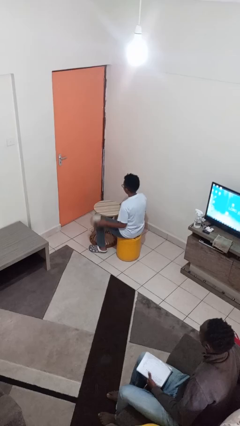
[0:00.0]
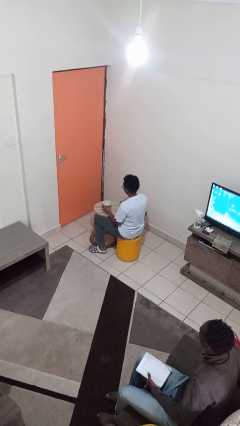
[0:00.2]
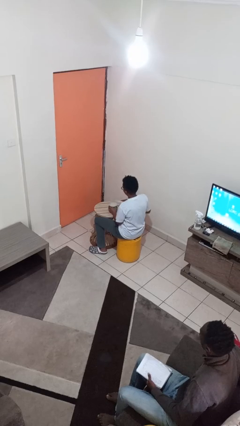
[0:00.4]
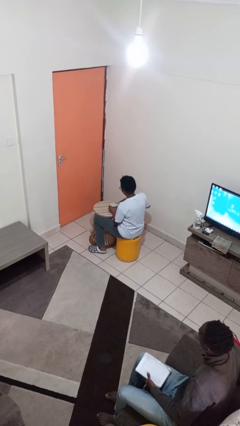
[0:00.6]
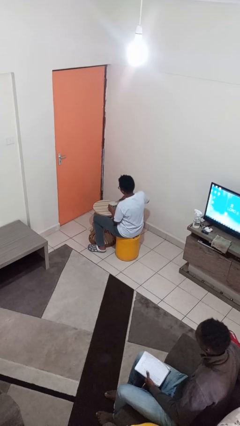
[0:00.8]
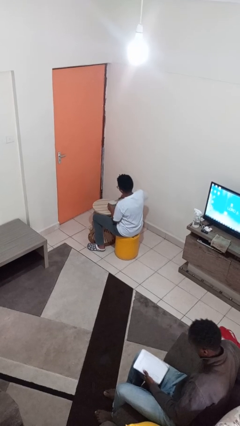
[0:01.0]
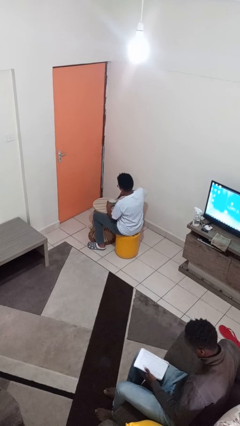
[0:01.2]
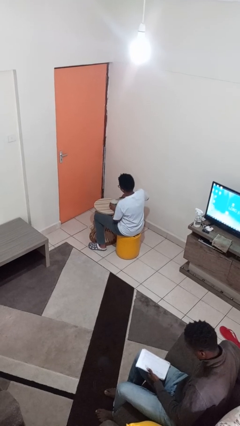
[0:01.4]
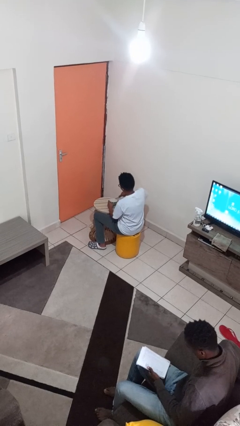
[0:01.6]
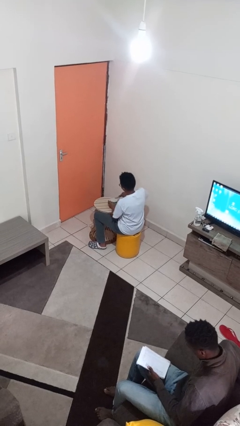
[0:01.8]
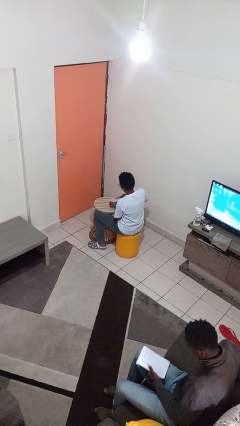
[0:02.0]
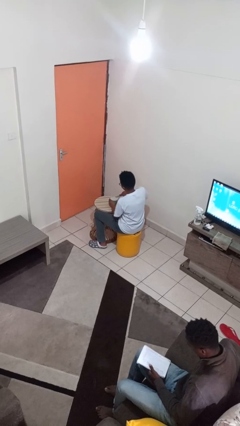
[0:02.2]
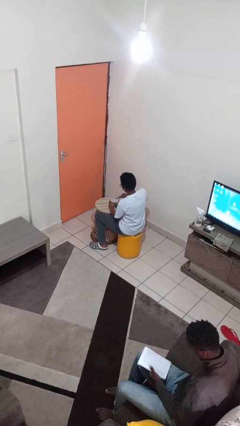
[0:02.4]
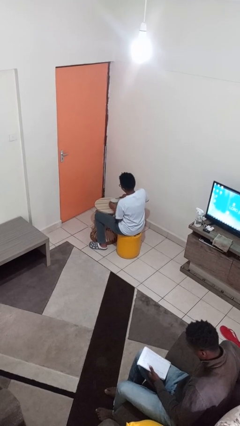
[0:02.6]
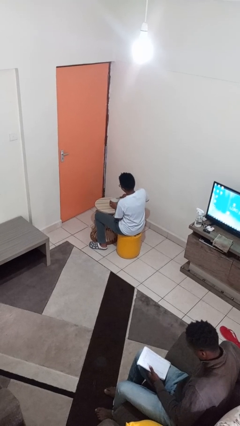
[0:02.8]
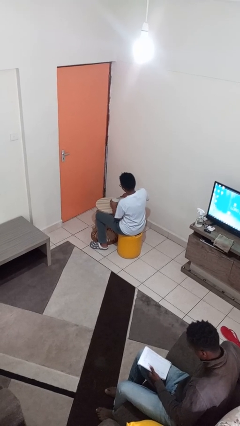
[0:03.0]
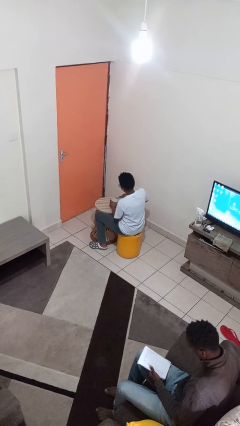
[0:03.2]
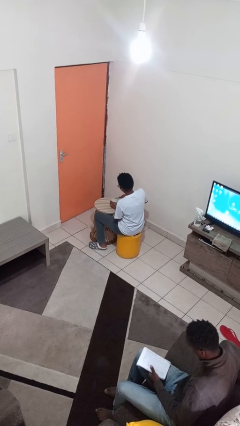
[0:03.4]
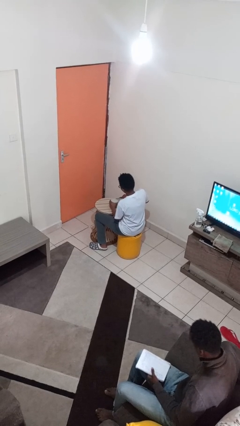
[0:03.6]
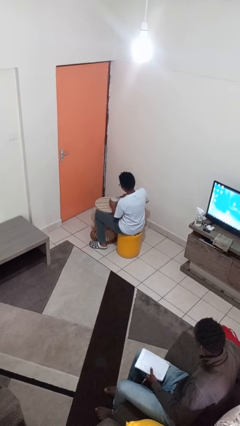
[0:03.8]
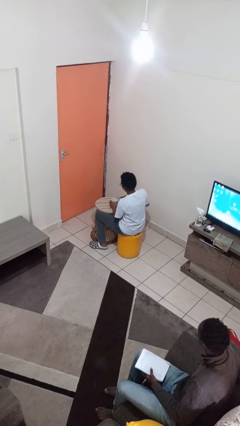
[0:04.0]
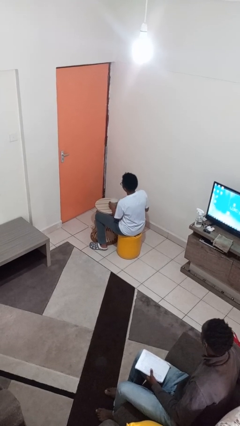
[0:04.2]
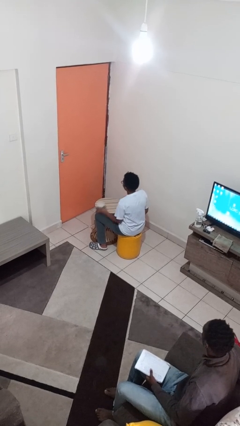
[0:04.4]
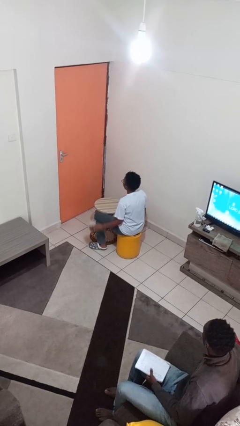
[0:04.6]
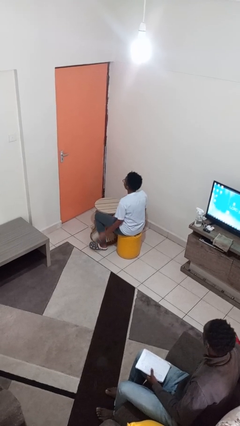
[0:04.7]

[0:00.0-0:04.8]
person opens can with can opener

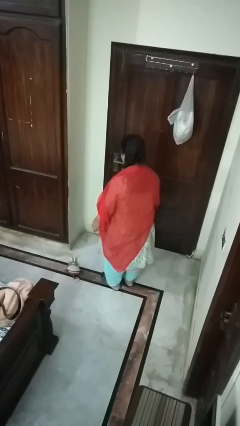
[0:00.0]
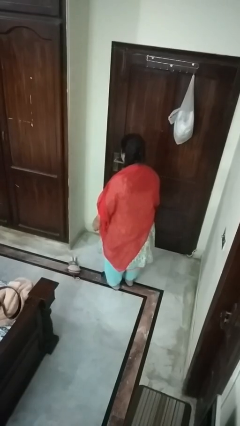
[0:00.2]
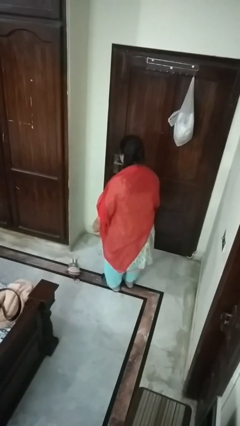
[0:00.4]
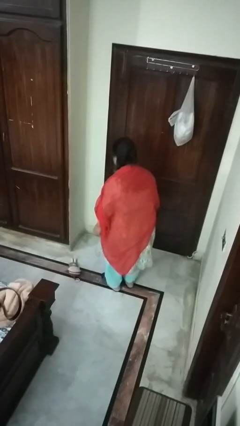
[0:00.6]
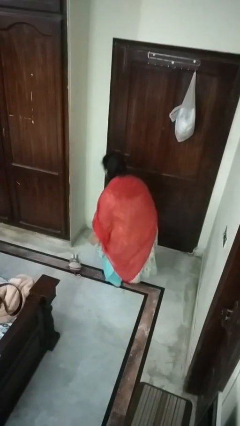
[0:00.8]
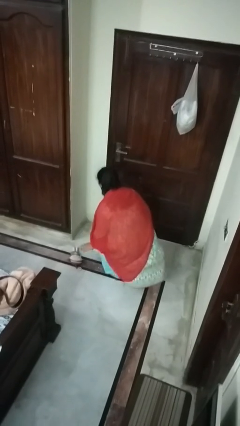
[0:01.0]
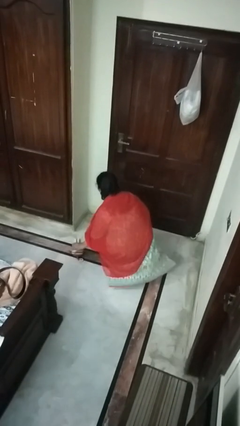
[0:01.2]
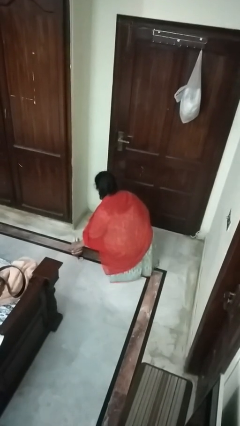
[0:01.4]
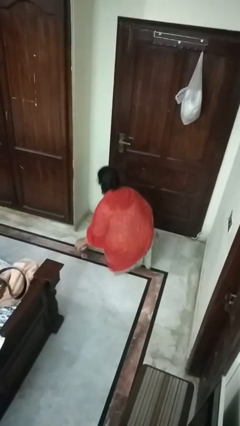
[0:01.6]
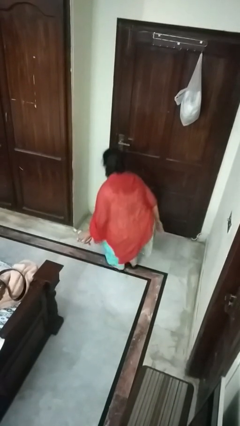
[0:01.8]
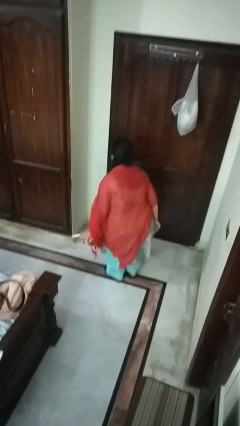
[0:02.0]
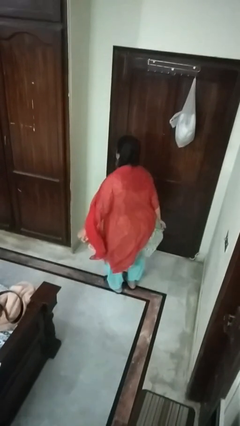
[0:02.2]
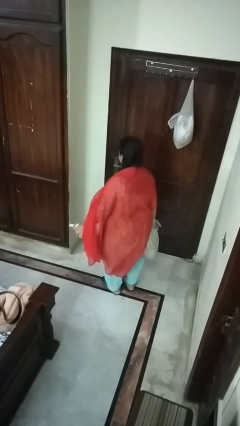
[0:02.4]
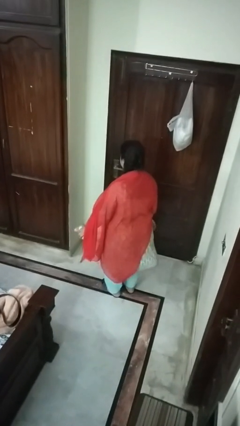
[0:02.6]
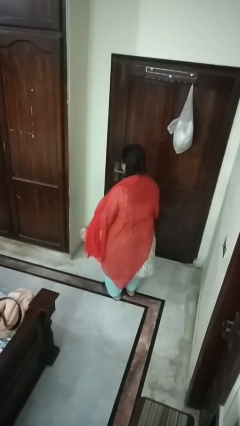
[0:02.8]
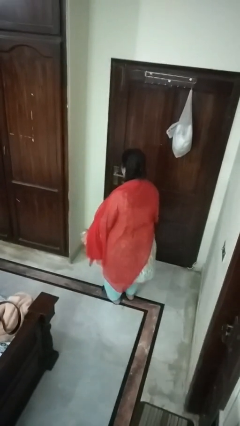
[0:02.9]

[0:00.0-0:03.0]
person picks up object from floor

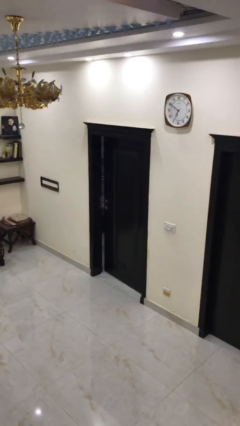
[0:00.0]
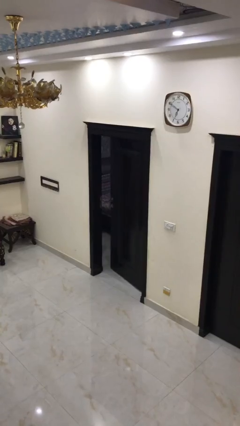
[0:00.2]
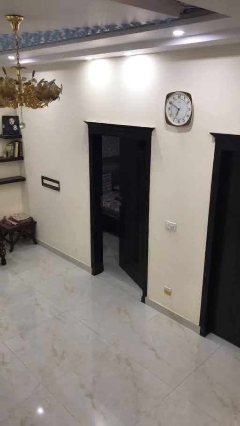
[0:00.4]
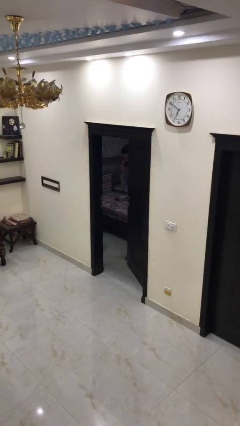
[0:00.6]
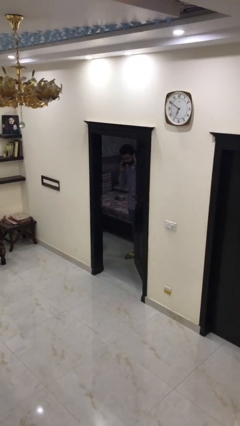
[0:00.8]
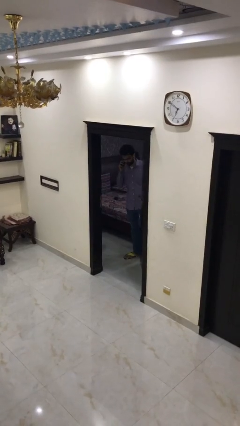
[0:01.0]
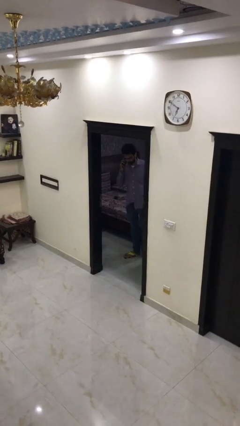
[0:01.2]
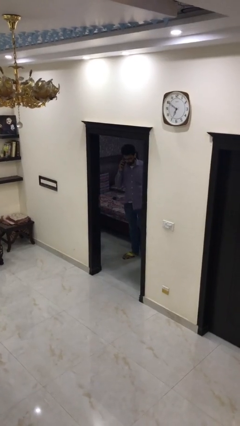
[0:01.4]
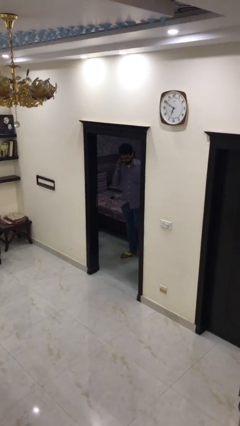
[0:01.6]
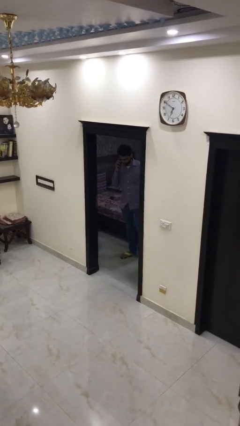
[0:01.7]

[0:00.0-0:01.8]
person opens facility door

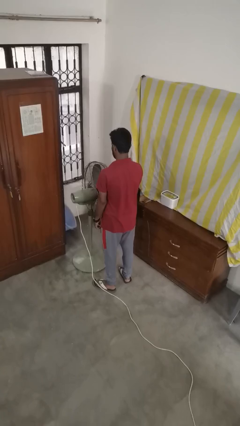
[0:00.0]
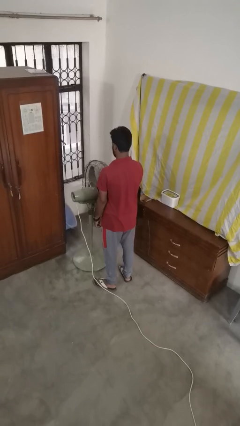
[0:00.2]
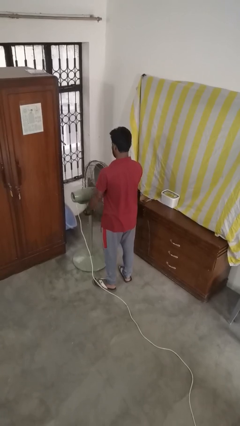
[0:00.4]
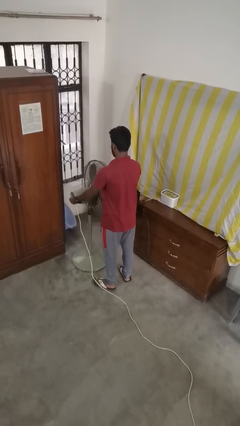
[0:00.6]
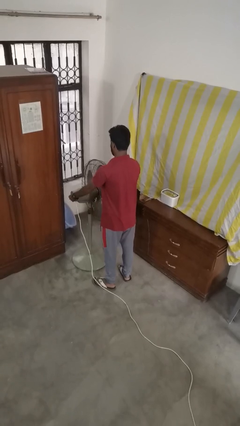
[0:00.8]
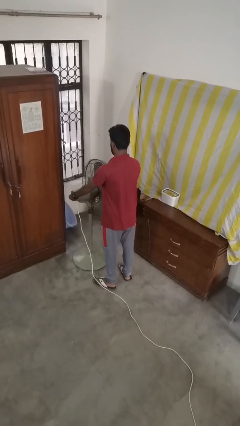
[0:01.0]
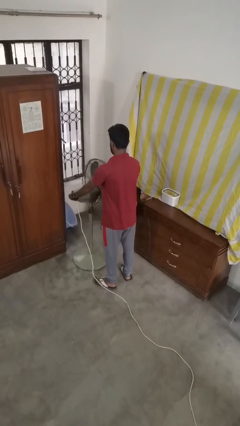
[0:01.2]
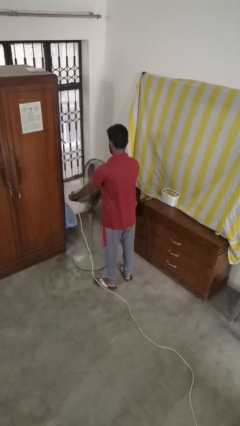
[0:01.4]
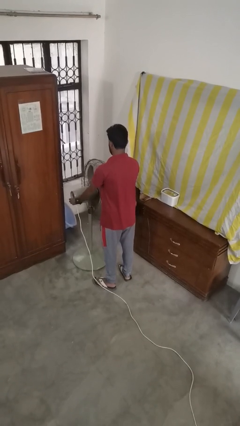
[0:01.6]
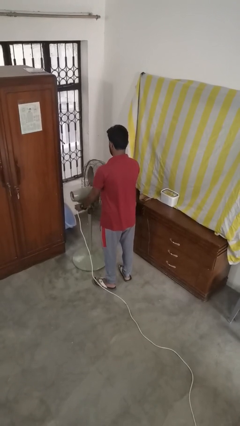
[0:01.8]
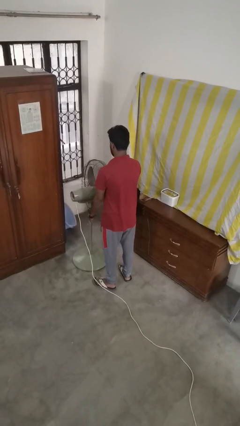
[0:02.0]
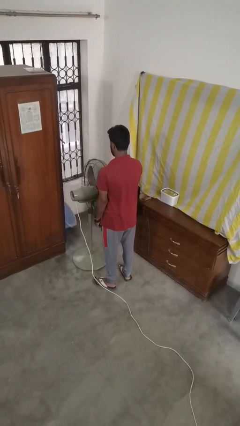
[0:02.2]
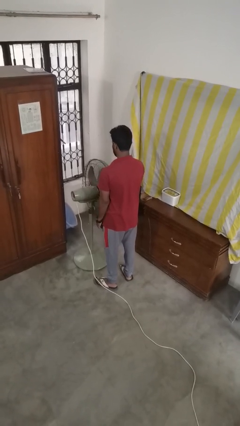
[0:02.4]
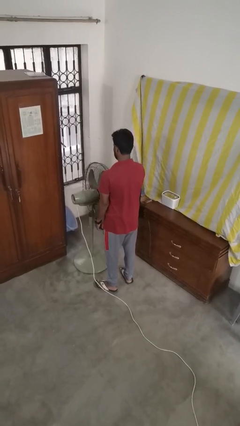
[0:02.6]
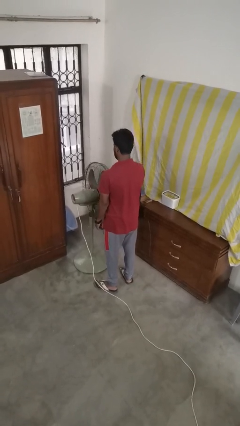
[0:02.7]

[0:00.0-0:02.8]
person turns off fan

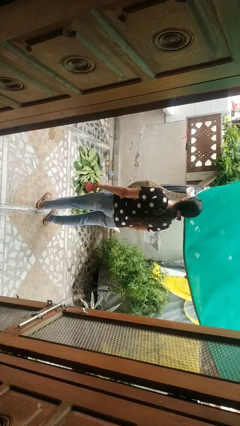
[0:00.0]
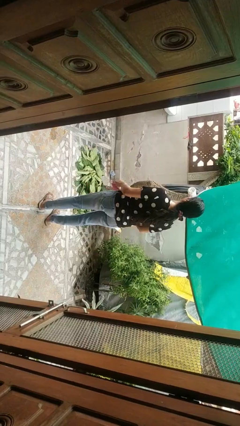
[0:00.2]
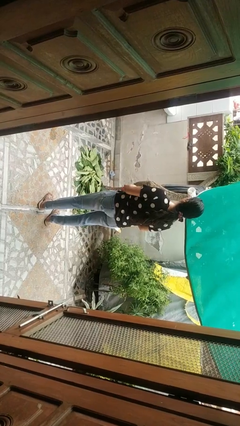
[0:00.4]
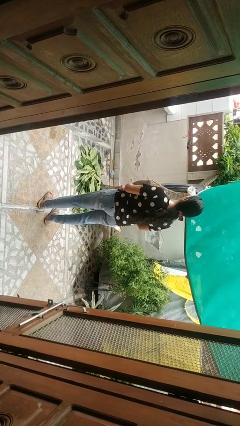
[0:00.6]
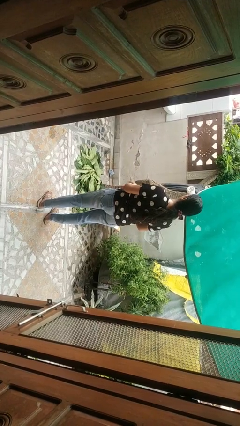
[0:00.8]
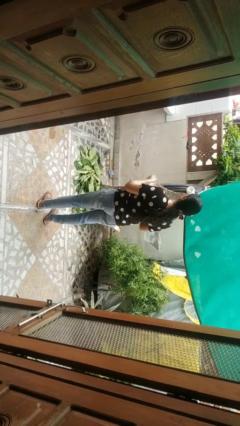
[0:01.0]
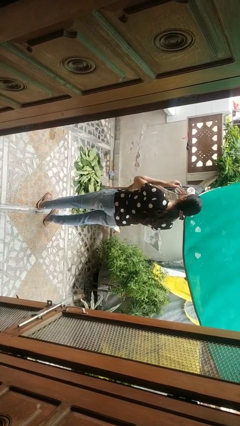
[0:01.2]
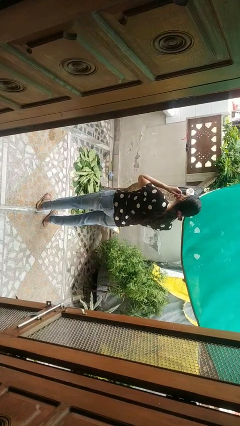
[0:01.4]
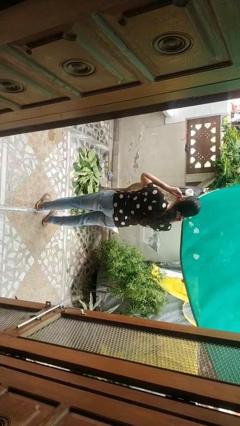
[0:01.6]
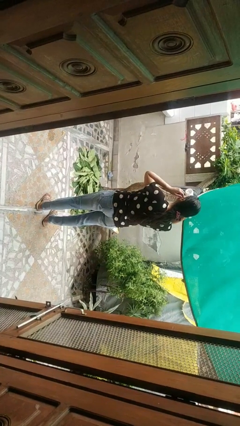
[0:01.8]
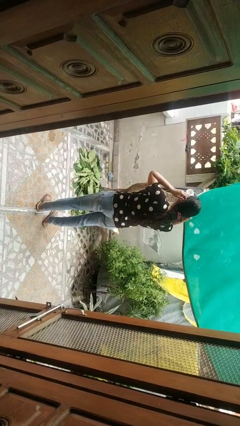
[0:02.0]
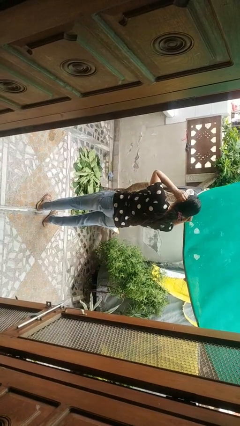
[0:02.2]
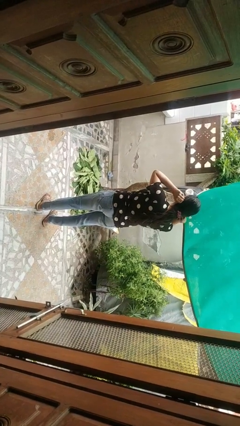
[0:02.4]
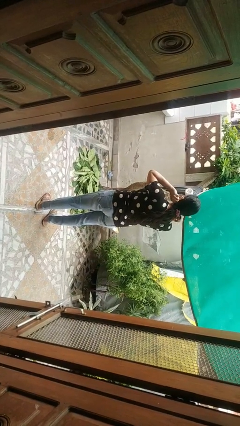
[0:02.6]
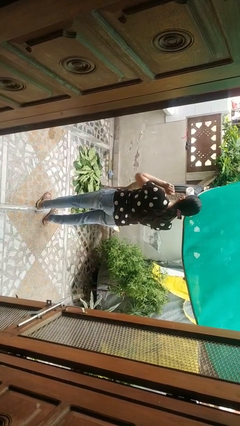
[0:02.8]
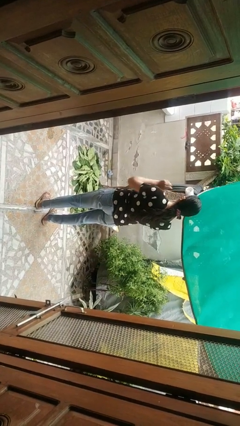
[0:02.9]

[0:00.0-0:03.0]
person puts on facemask

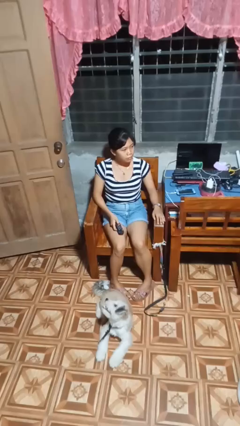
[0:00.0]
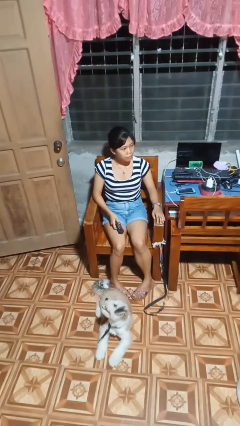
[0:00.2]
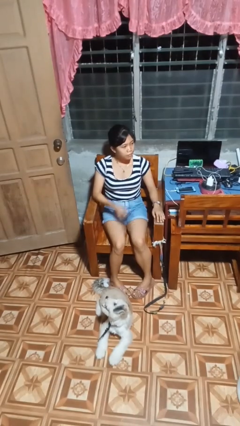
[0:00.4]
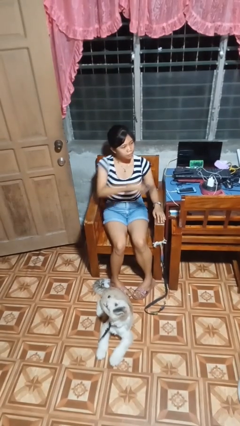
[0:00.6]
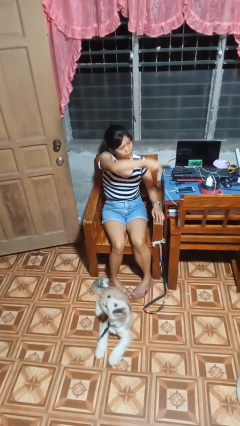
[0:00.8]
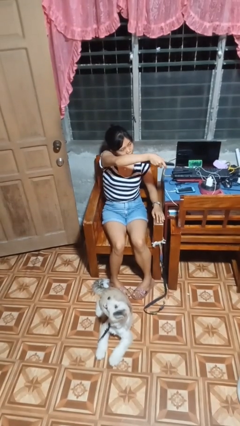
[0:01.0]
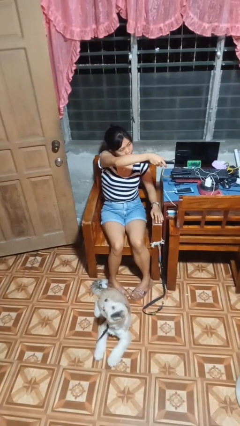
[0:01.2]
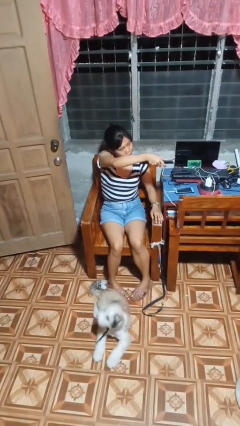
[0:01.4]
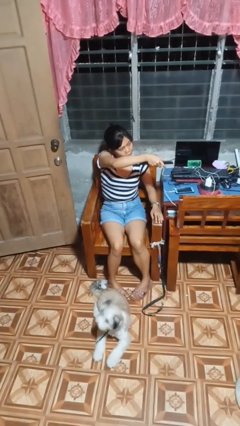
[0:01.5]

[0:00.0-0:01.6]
person uses television remote

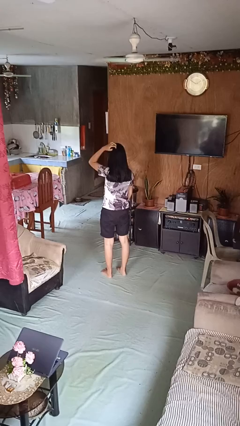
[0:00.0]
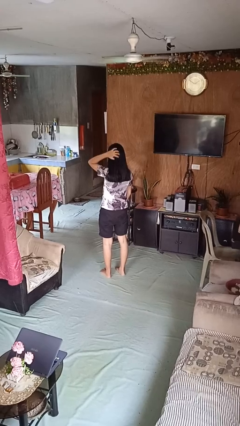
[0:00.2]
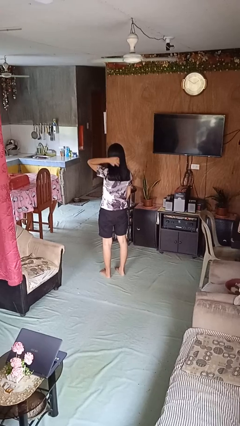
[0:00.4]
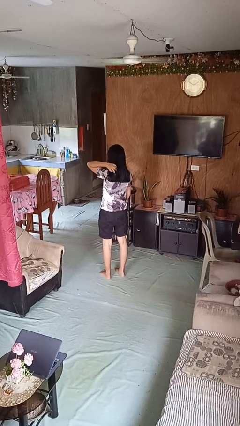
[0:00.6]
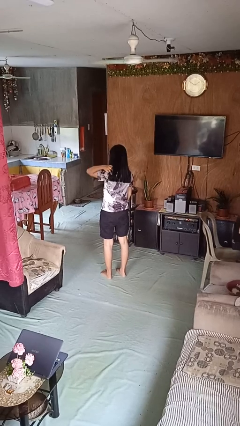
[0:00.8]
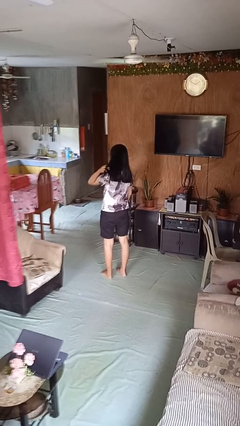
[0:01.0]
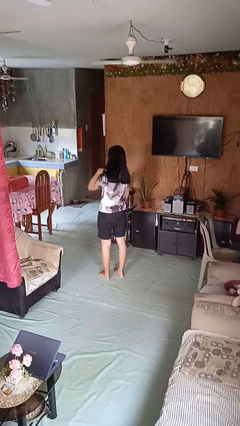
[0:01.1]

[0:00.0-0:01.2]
person strokes hair
